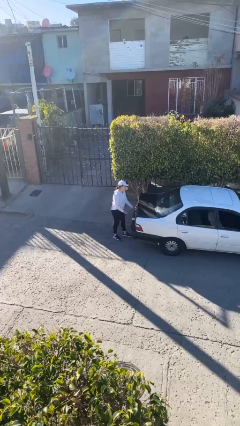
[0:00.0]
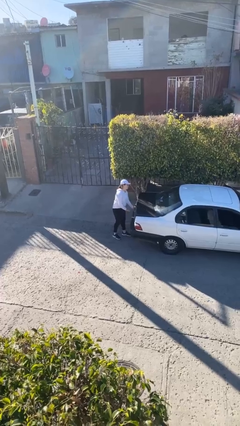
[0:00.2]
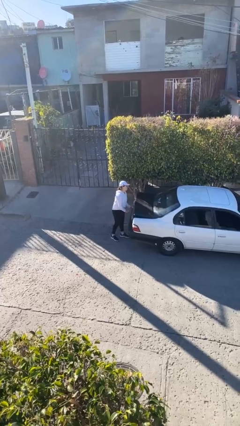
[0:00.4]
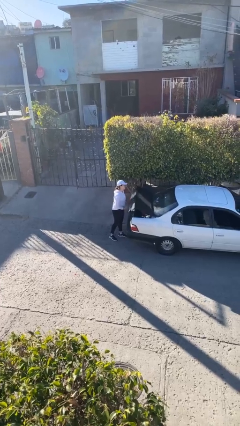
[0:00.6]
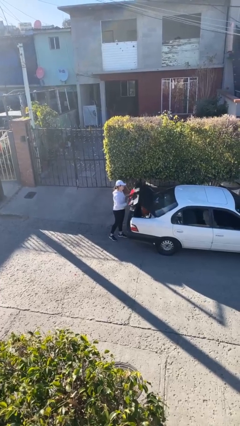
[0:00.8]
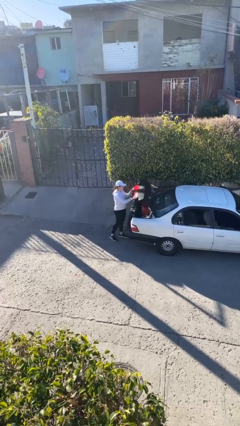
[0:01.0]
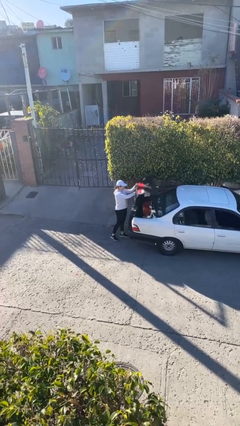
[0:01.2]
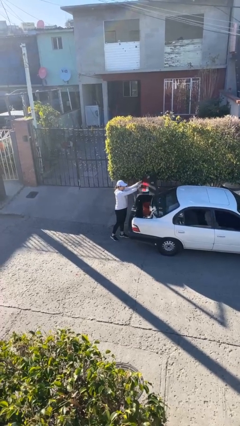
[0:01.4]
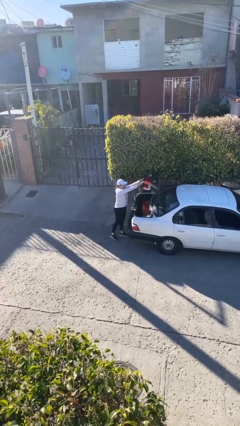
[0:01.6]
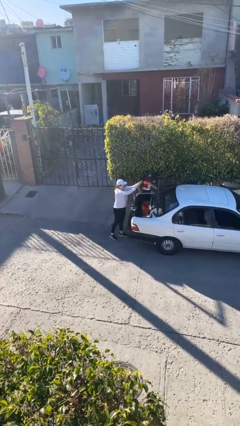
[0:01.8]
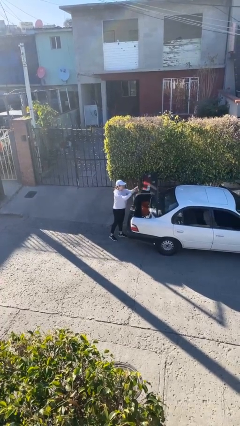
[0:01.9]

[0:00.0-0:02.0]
person opens car trunk

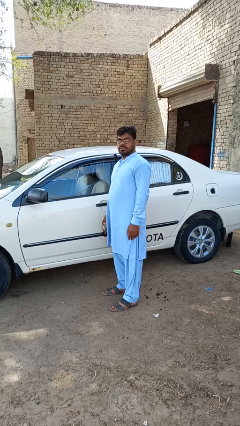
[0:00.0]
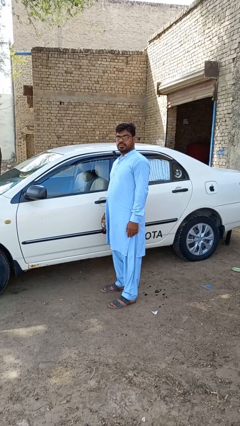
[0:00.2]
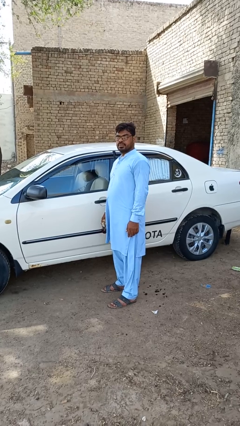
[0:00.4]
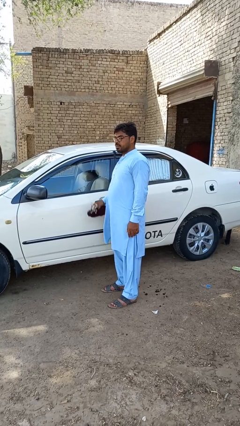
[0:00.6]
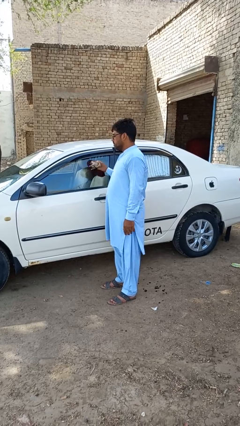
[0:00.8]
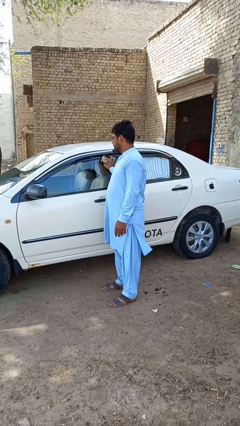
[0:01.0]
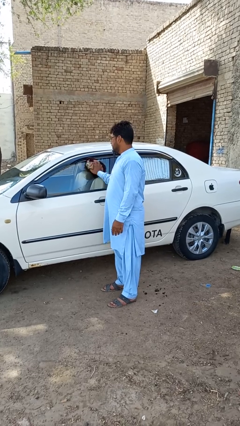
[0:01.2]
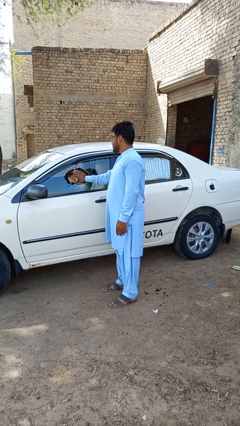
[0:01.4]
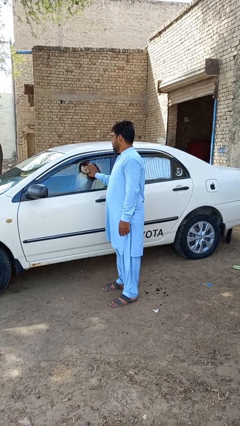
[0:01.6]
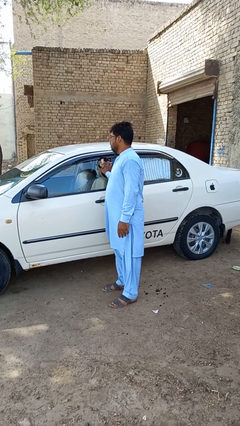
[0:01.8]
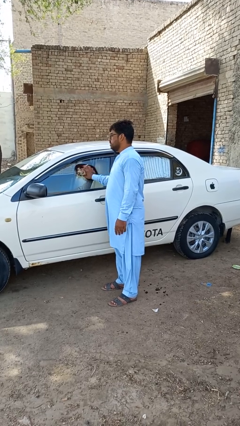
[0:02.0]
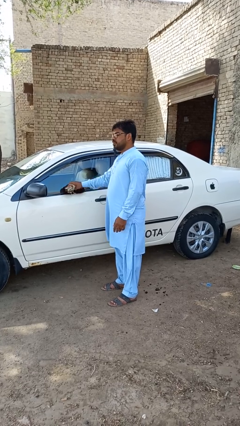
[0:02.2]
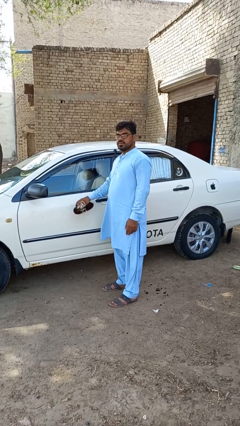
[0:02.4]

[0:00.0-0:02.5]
person polishes car with rag

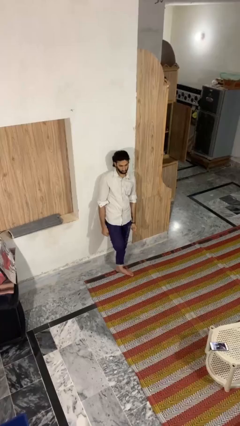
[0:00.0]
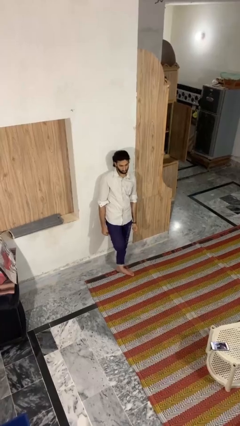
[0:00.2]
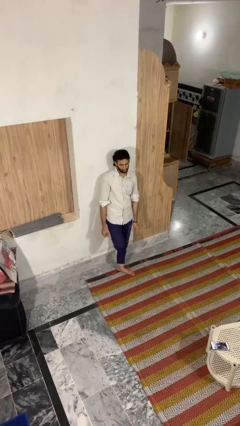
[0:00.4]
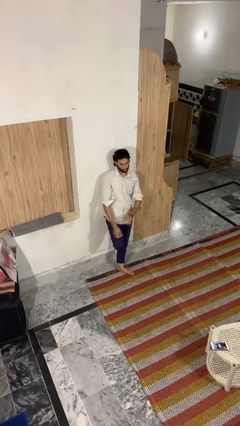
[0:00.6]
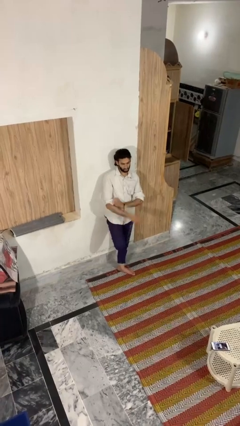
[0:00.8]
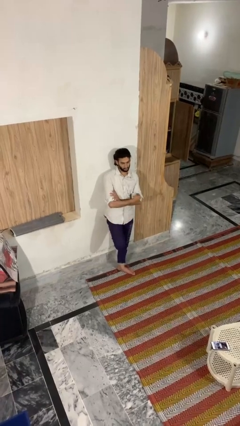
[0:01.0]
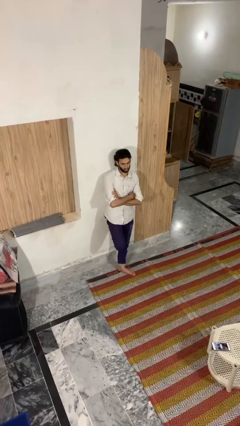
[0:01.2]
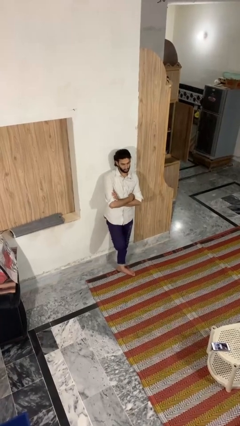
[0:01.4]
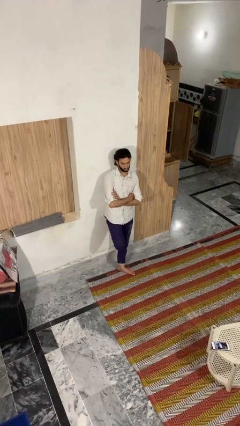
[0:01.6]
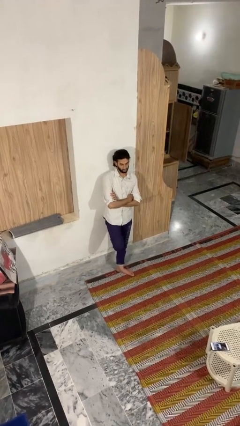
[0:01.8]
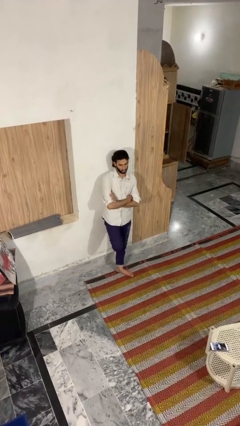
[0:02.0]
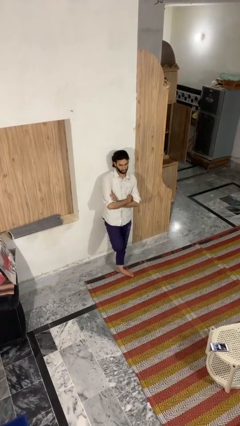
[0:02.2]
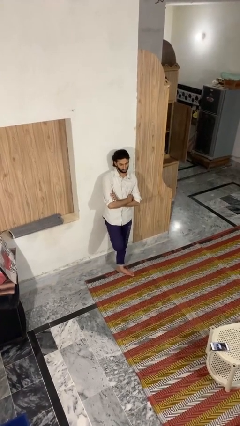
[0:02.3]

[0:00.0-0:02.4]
person crosses arms

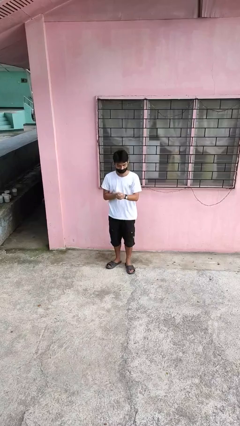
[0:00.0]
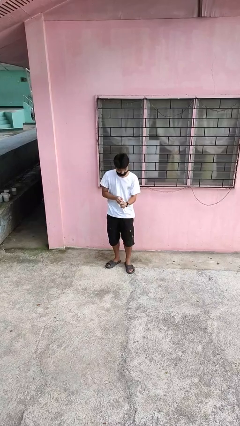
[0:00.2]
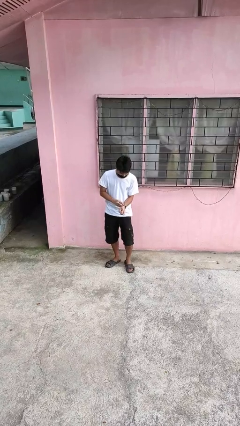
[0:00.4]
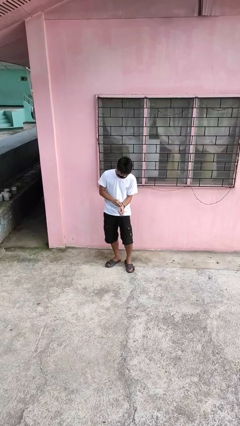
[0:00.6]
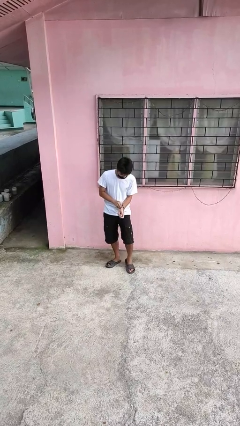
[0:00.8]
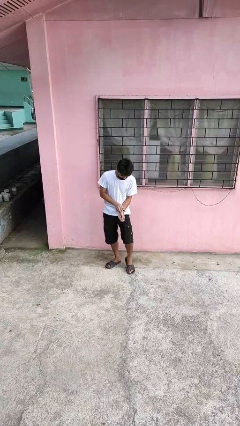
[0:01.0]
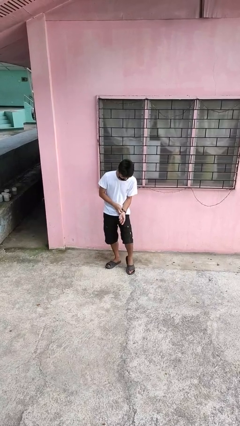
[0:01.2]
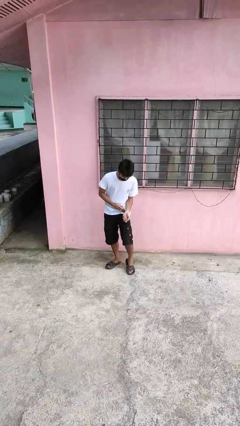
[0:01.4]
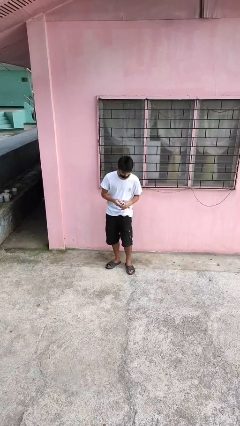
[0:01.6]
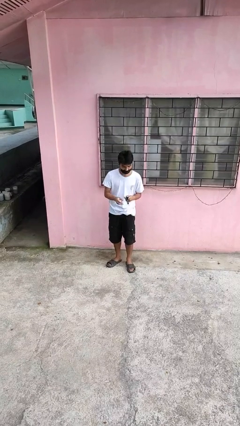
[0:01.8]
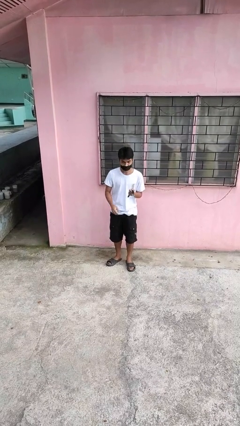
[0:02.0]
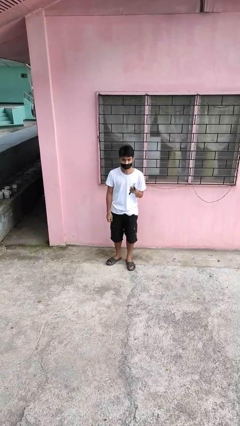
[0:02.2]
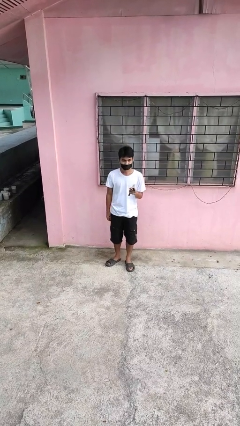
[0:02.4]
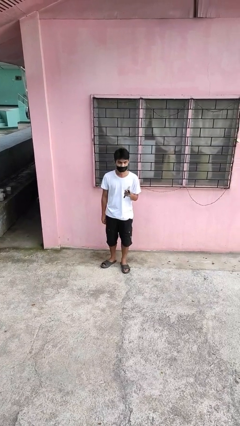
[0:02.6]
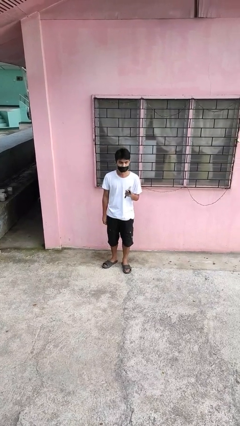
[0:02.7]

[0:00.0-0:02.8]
person takes off wristwatch

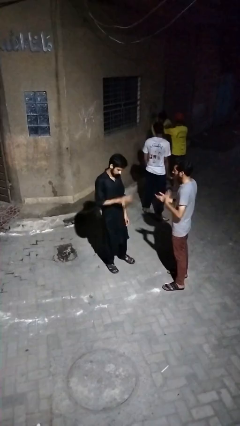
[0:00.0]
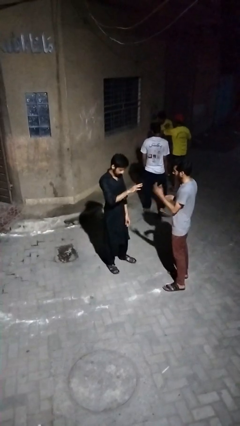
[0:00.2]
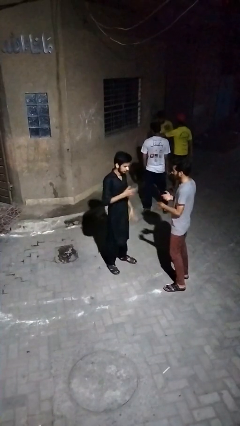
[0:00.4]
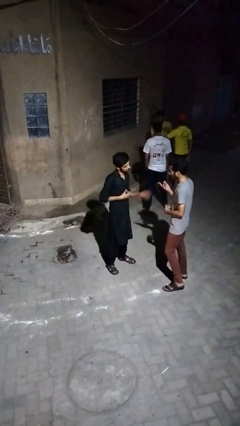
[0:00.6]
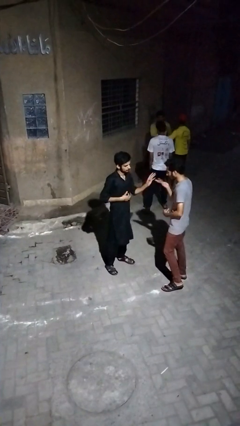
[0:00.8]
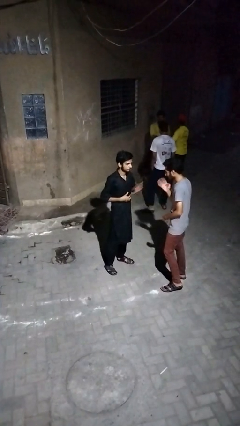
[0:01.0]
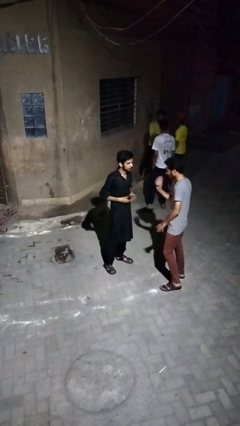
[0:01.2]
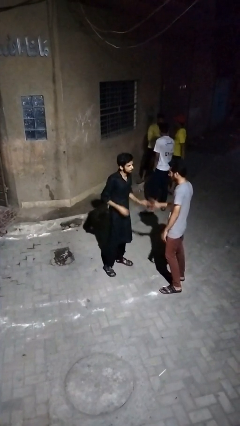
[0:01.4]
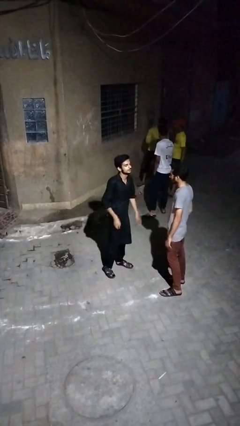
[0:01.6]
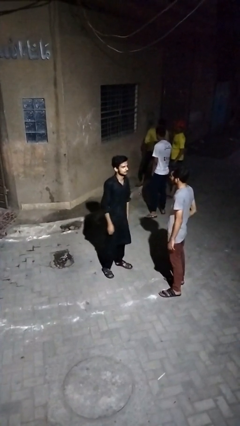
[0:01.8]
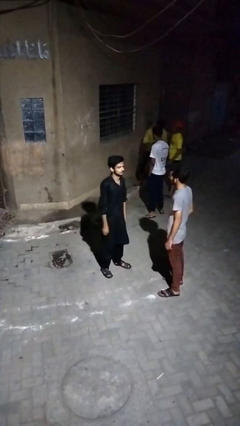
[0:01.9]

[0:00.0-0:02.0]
person talks to person

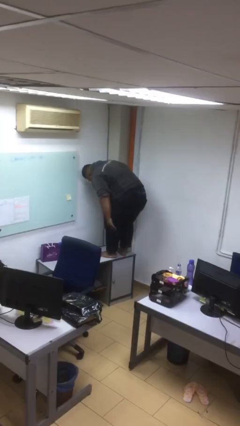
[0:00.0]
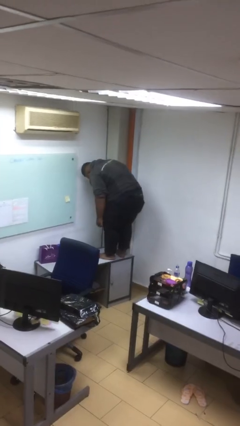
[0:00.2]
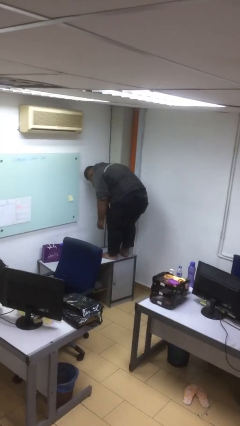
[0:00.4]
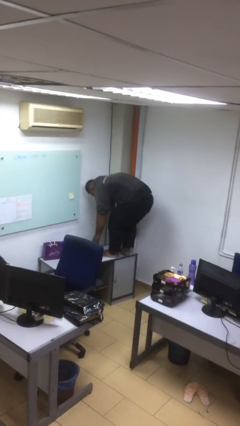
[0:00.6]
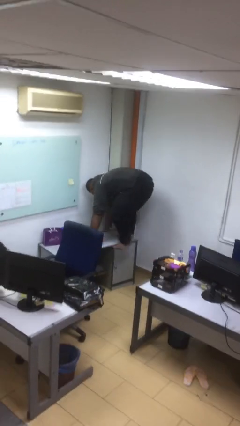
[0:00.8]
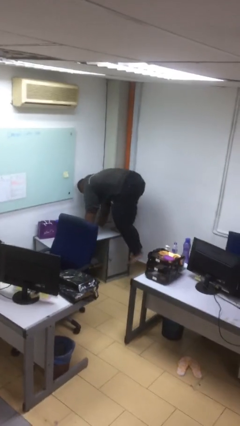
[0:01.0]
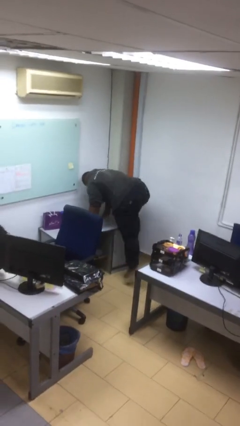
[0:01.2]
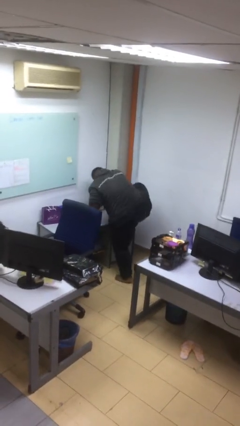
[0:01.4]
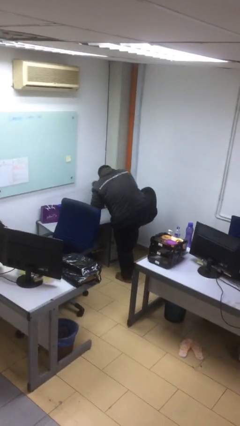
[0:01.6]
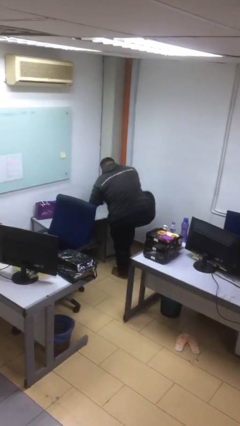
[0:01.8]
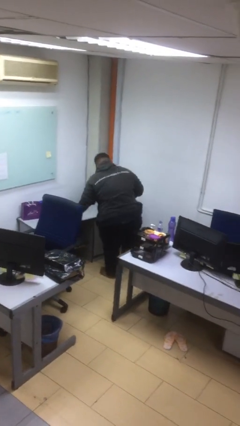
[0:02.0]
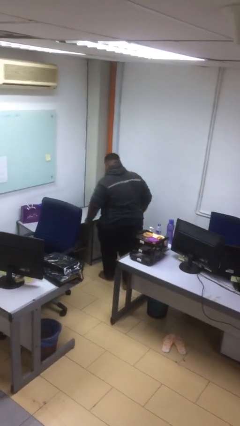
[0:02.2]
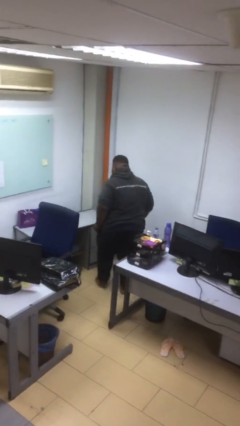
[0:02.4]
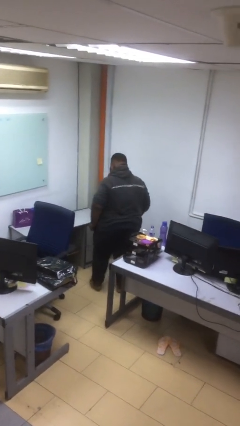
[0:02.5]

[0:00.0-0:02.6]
person climbs off table

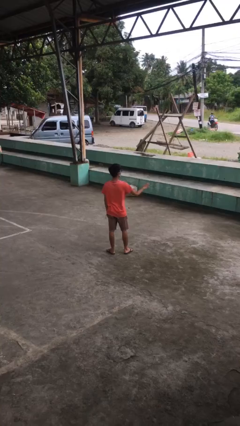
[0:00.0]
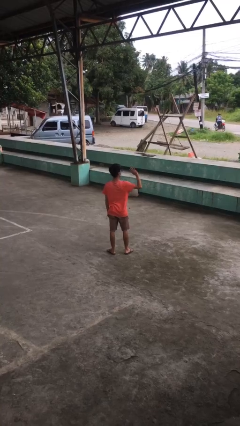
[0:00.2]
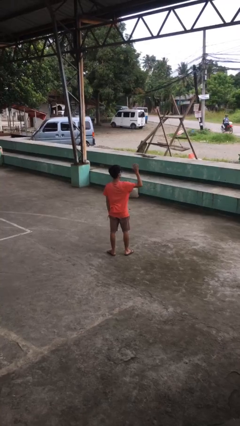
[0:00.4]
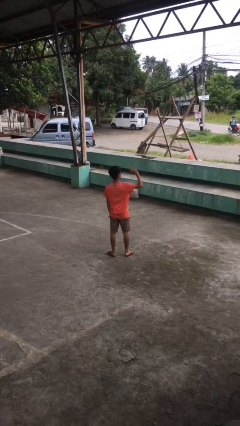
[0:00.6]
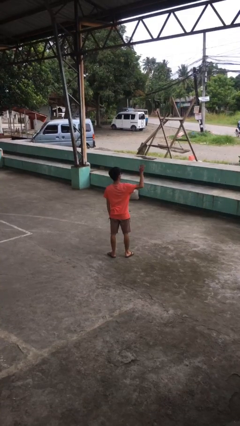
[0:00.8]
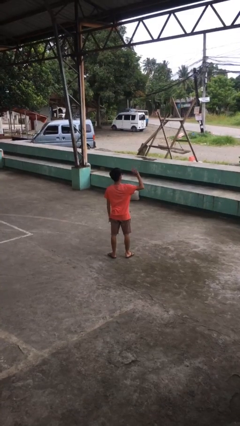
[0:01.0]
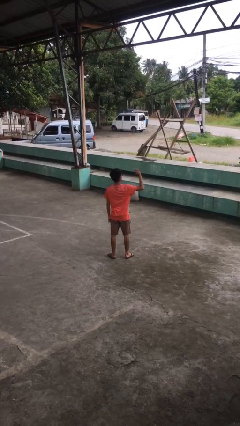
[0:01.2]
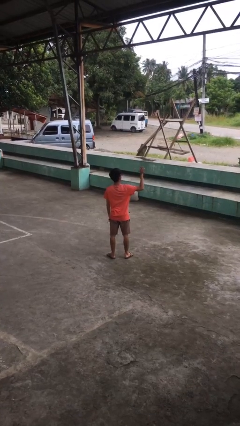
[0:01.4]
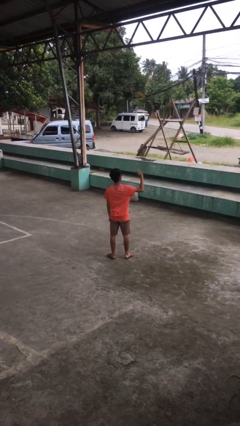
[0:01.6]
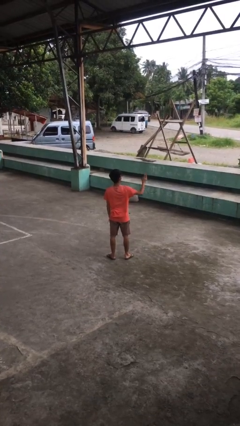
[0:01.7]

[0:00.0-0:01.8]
person waves at person

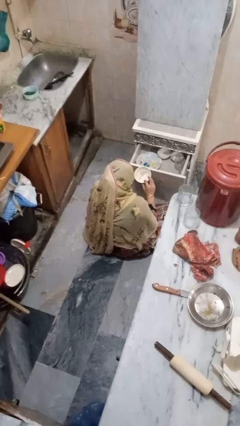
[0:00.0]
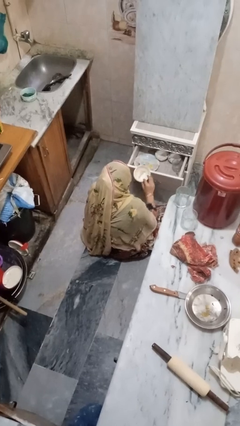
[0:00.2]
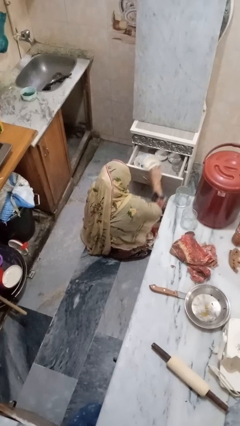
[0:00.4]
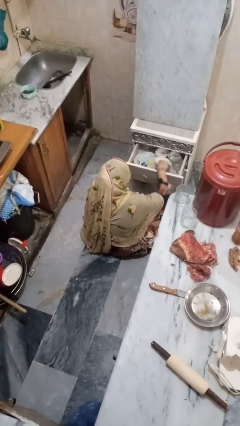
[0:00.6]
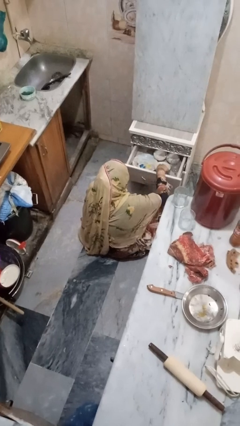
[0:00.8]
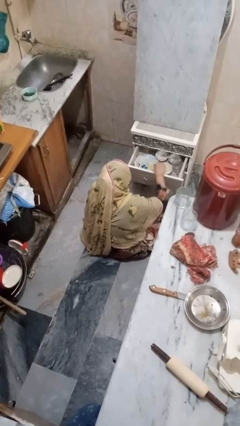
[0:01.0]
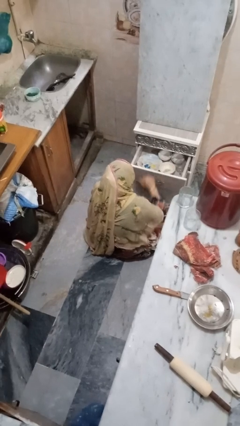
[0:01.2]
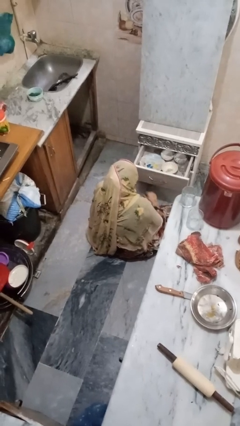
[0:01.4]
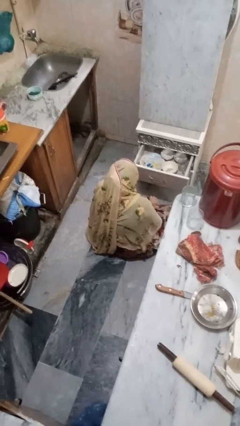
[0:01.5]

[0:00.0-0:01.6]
person puts object into kitchen drawer
